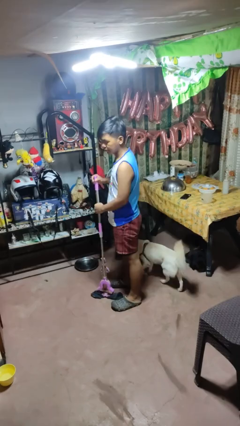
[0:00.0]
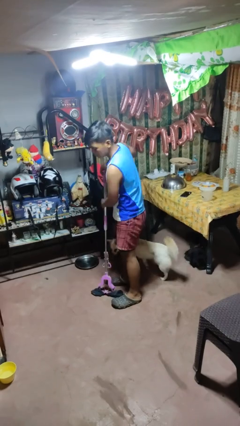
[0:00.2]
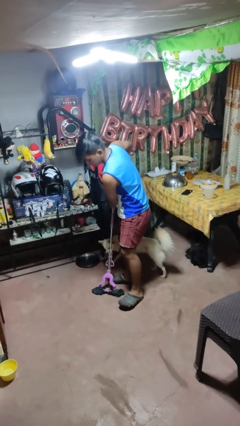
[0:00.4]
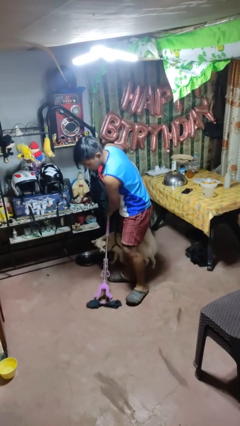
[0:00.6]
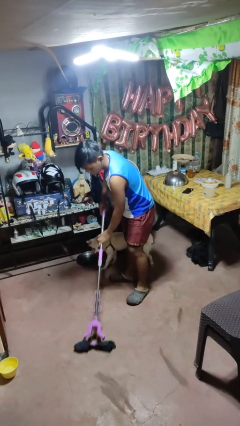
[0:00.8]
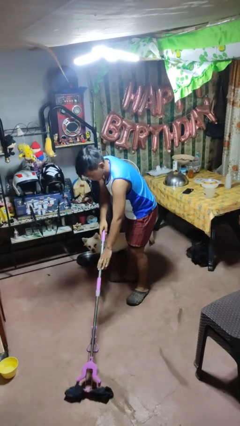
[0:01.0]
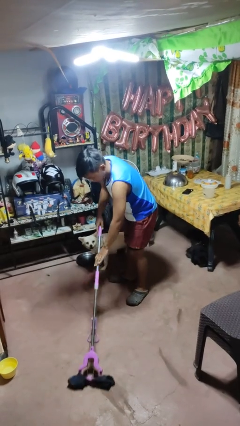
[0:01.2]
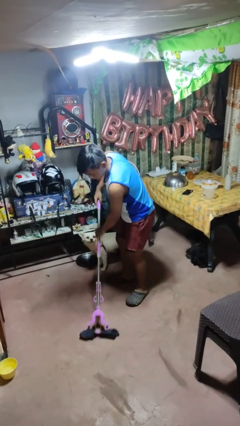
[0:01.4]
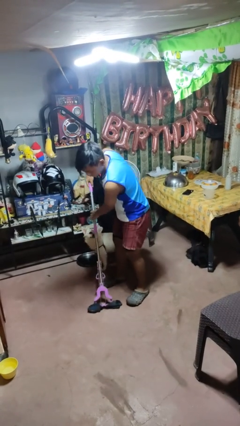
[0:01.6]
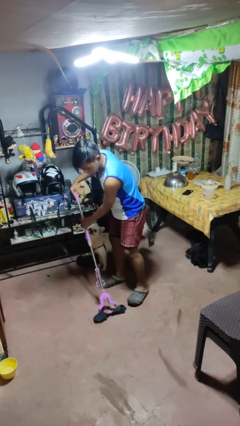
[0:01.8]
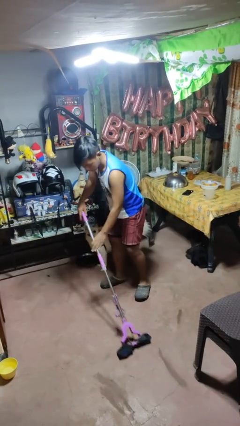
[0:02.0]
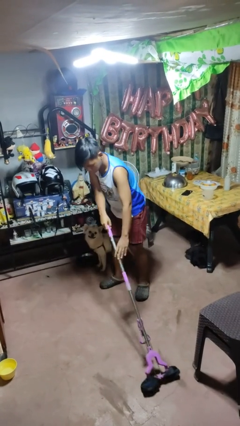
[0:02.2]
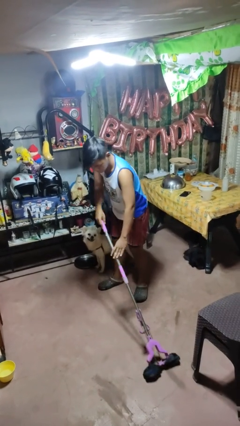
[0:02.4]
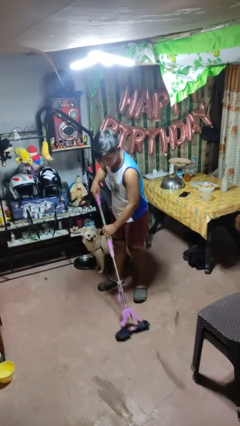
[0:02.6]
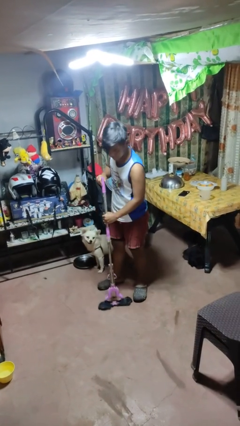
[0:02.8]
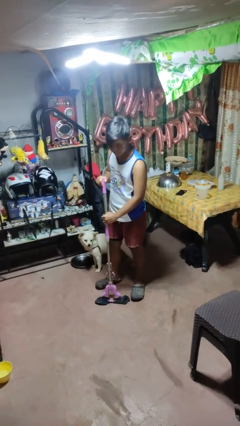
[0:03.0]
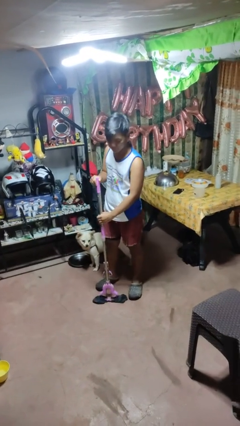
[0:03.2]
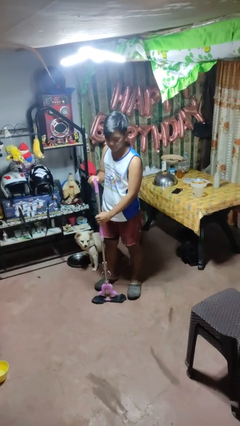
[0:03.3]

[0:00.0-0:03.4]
person mops

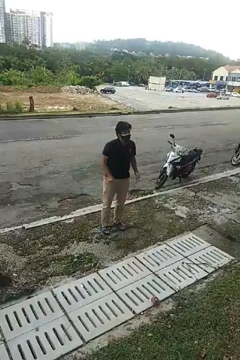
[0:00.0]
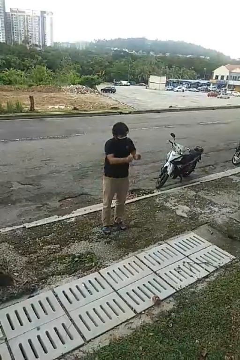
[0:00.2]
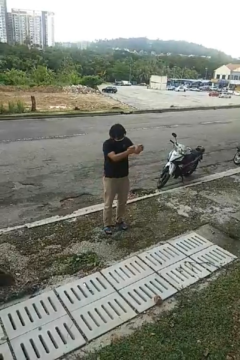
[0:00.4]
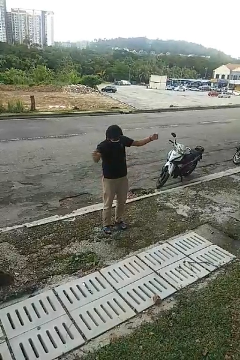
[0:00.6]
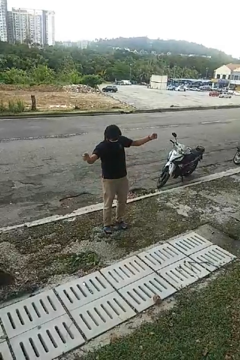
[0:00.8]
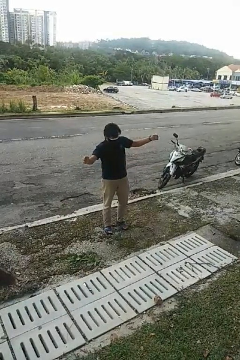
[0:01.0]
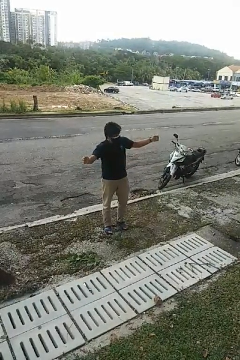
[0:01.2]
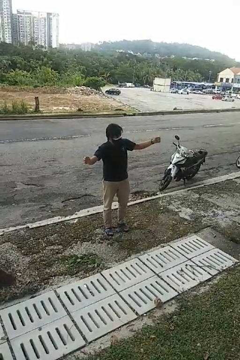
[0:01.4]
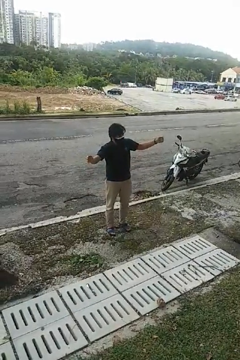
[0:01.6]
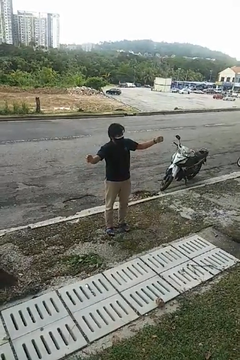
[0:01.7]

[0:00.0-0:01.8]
person gestures zoom in

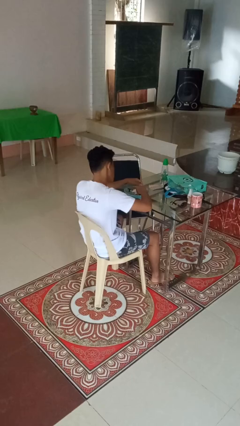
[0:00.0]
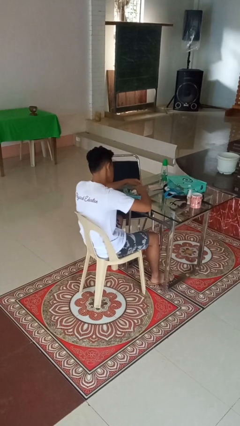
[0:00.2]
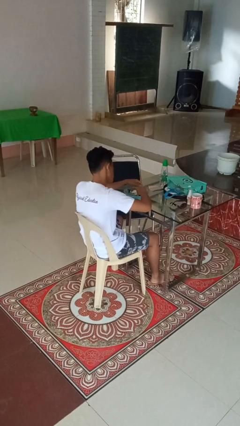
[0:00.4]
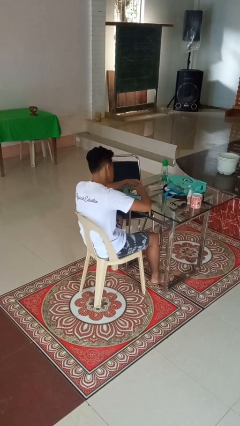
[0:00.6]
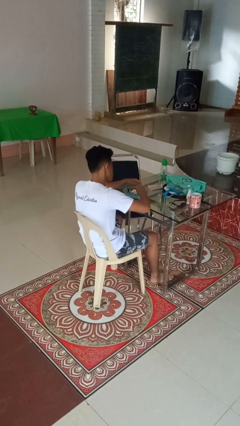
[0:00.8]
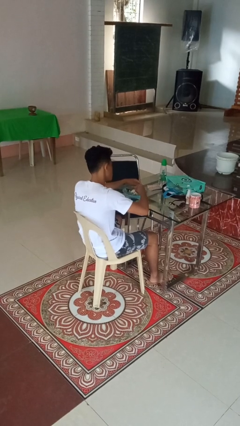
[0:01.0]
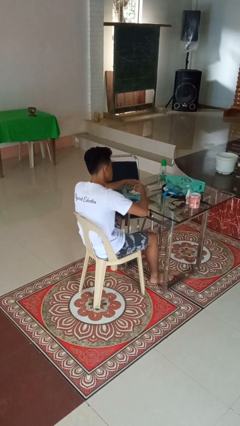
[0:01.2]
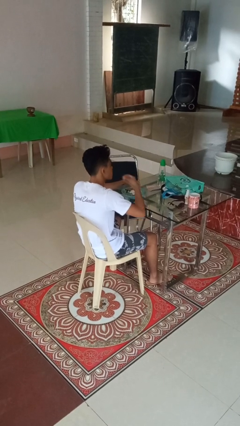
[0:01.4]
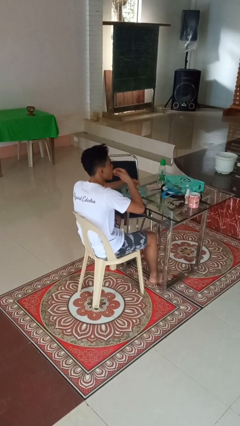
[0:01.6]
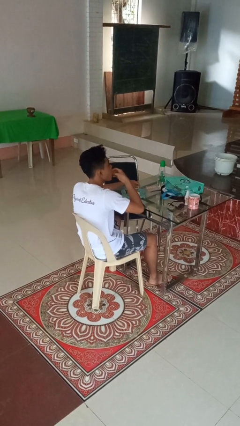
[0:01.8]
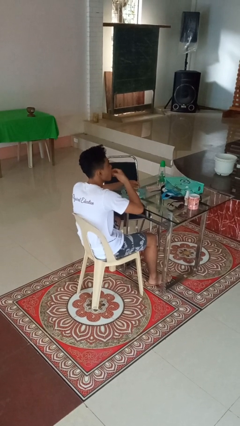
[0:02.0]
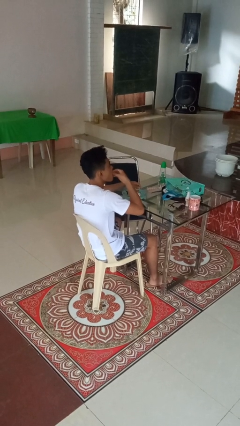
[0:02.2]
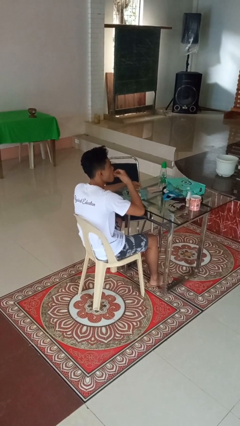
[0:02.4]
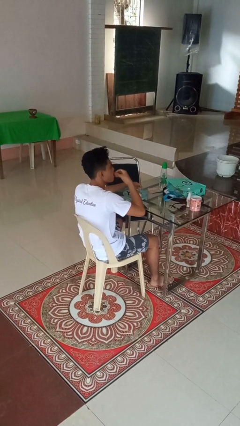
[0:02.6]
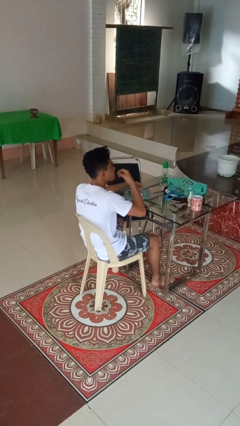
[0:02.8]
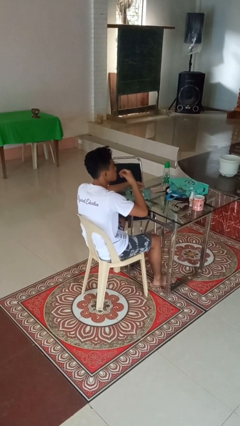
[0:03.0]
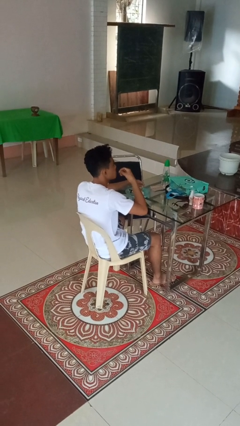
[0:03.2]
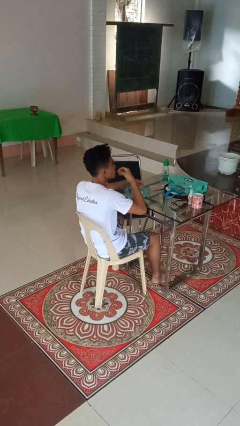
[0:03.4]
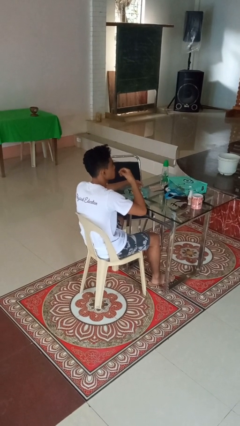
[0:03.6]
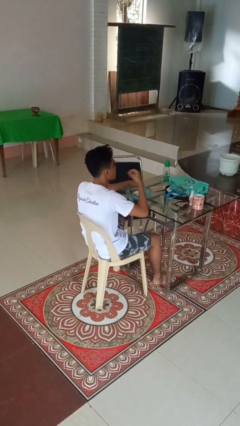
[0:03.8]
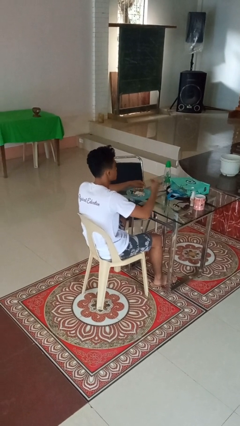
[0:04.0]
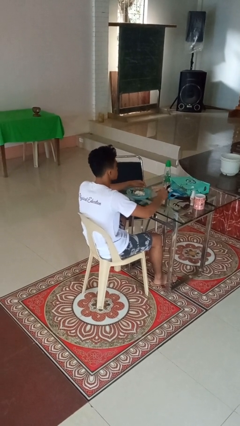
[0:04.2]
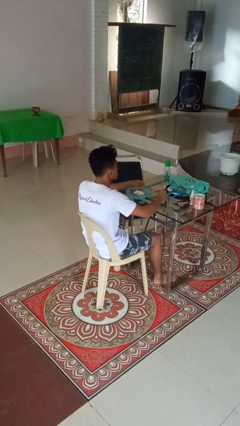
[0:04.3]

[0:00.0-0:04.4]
person eats with hands

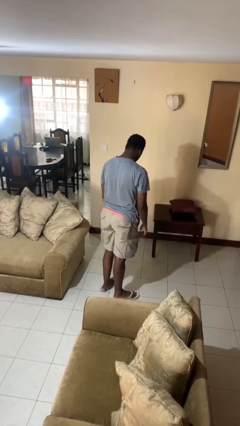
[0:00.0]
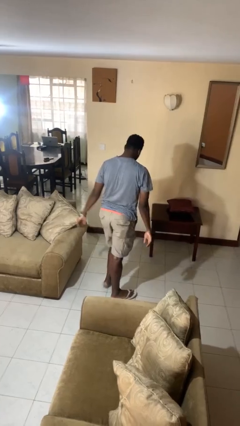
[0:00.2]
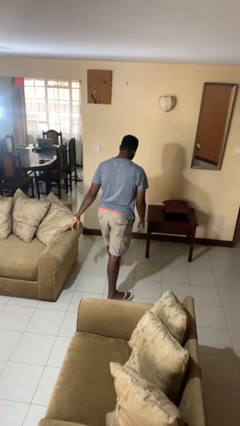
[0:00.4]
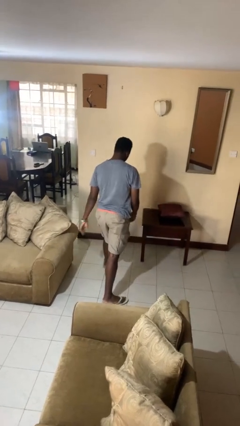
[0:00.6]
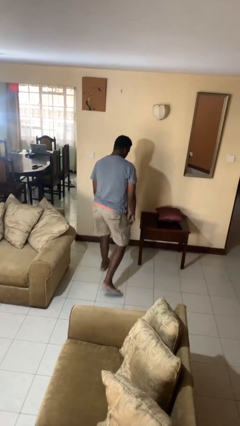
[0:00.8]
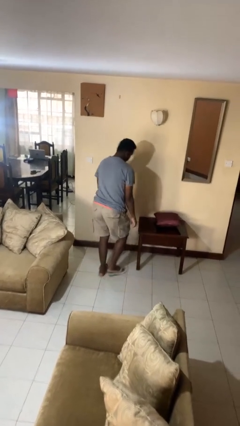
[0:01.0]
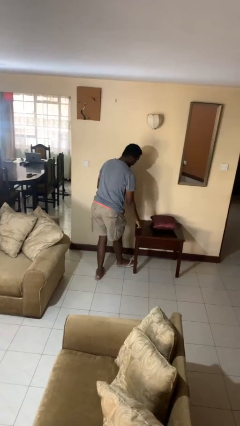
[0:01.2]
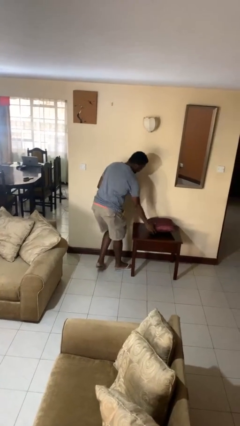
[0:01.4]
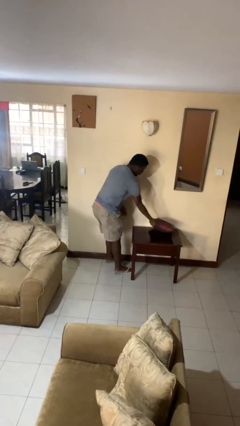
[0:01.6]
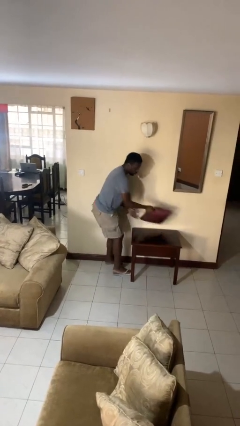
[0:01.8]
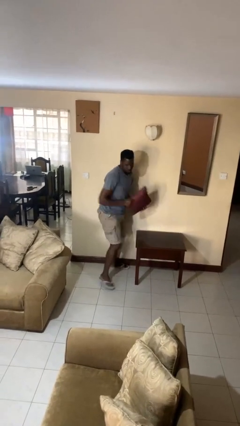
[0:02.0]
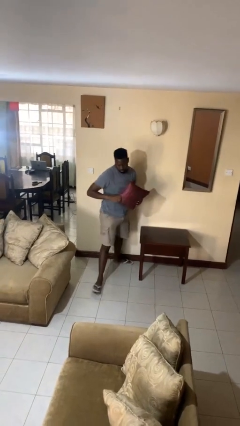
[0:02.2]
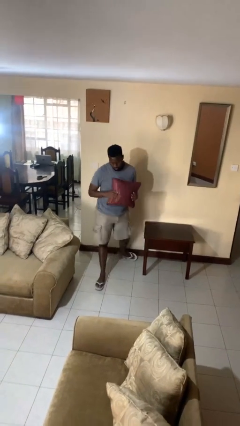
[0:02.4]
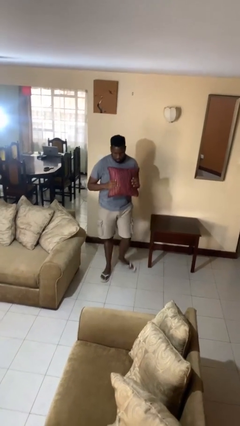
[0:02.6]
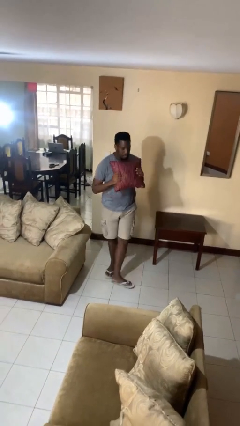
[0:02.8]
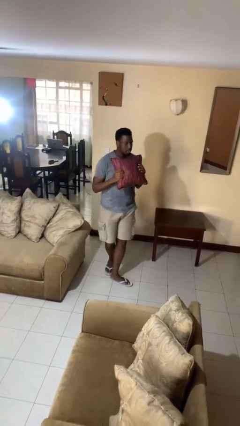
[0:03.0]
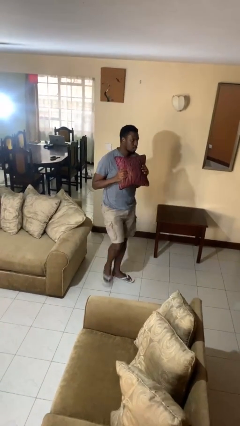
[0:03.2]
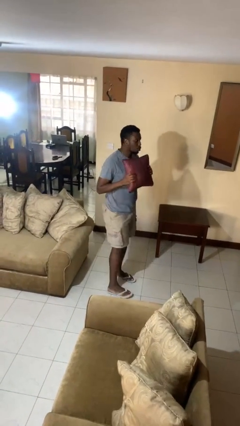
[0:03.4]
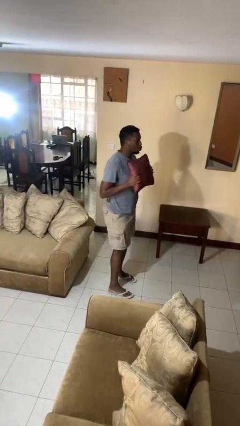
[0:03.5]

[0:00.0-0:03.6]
person picks up object from table

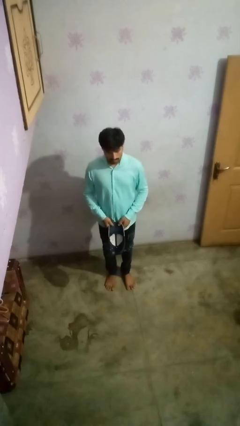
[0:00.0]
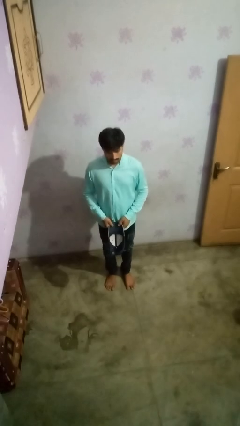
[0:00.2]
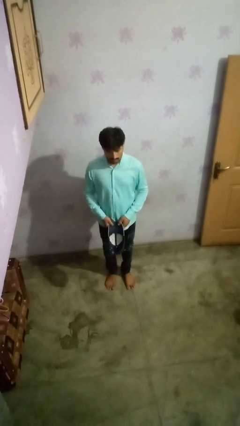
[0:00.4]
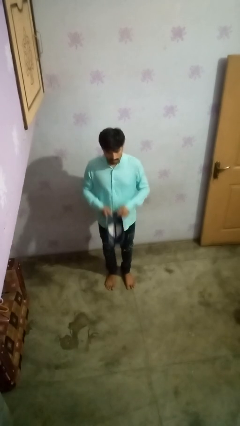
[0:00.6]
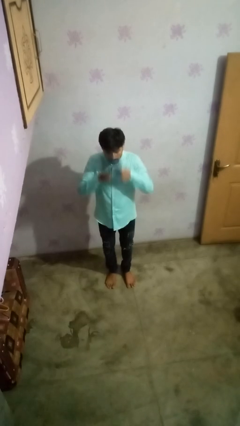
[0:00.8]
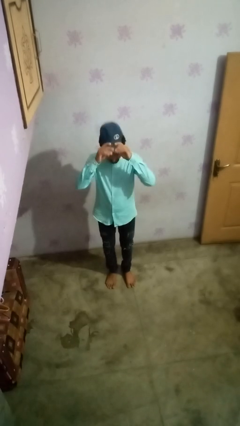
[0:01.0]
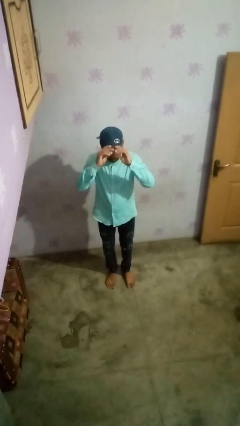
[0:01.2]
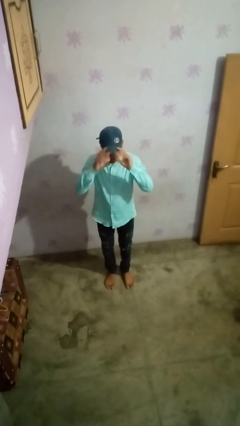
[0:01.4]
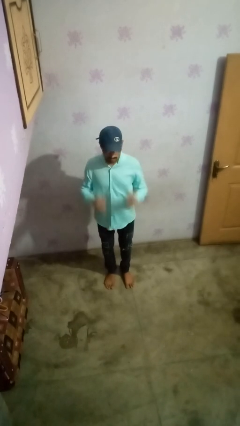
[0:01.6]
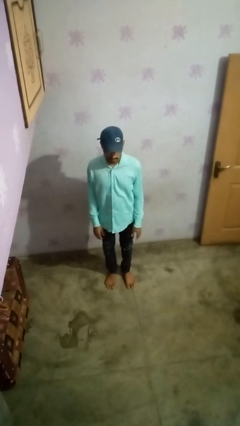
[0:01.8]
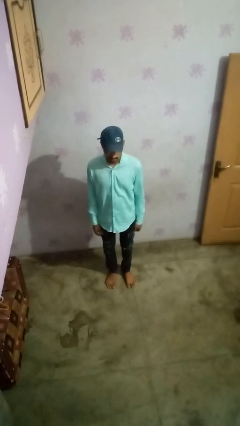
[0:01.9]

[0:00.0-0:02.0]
person puts on hat

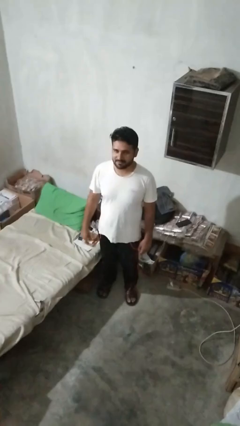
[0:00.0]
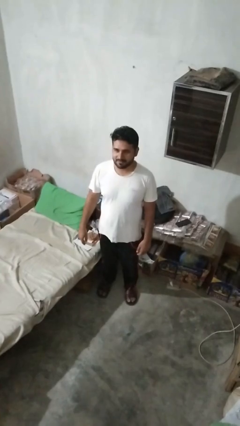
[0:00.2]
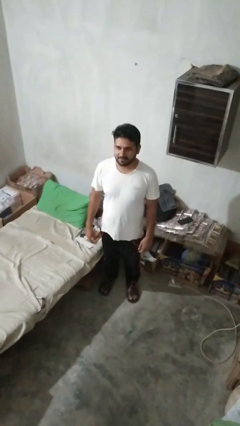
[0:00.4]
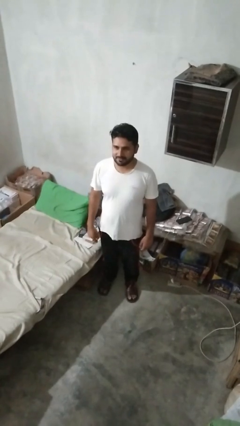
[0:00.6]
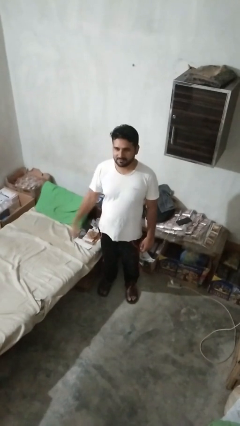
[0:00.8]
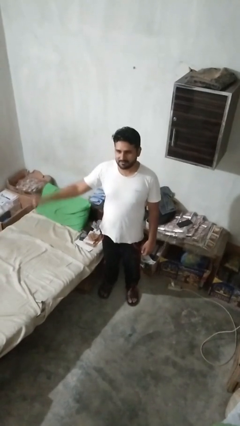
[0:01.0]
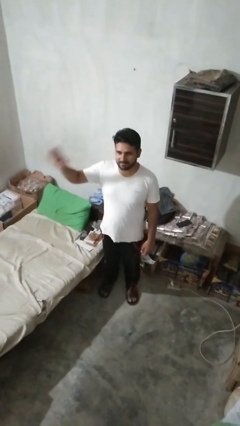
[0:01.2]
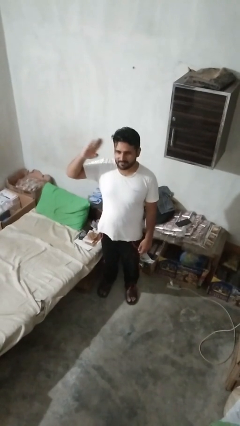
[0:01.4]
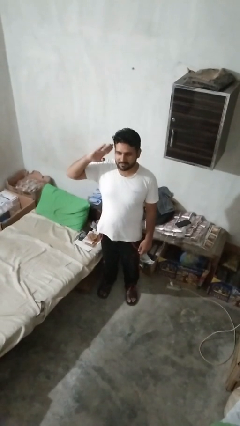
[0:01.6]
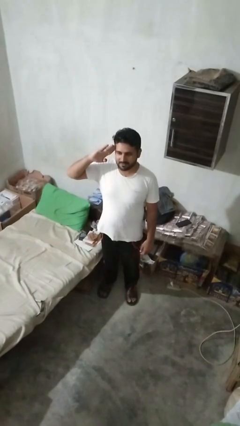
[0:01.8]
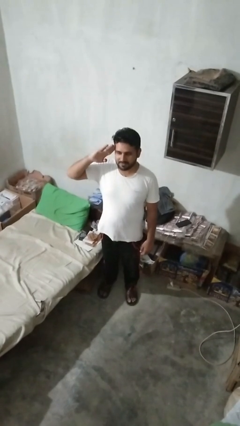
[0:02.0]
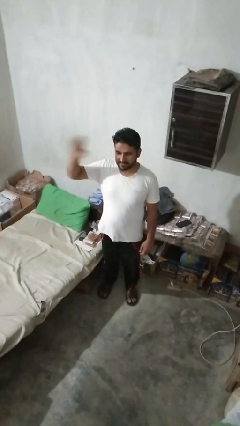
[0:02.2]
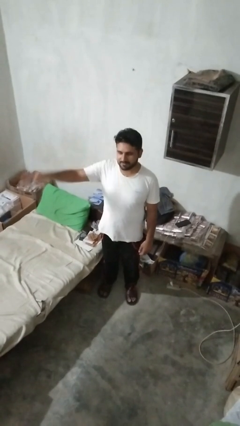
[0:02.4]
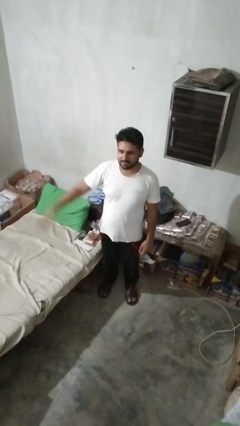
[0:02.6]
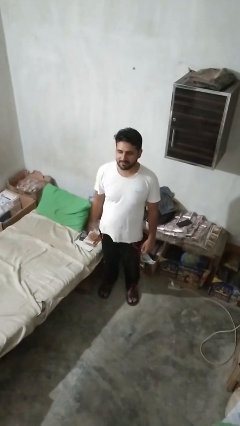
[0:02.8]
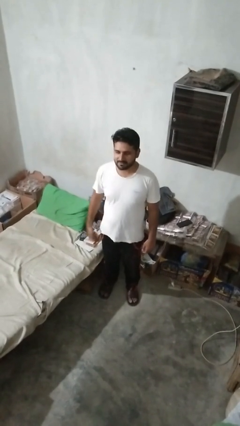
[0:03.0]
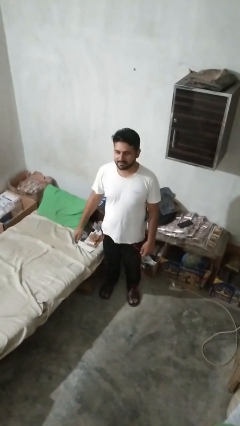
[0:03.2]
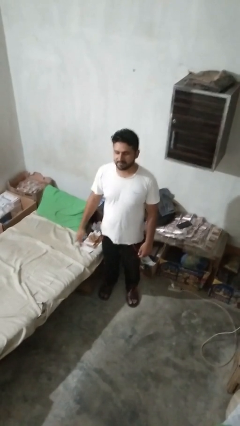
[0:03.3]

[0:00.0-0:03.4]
person salutes
